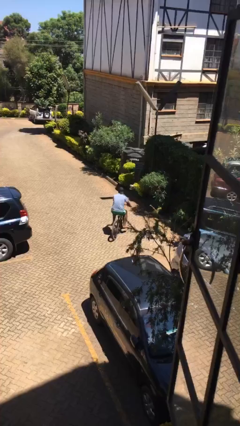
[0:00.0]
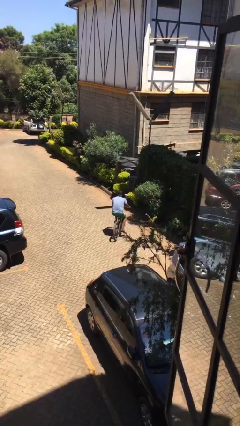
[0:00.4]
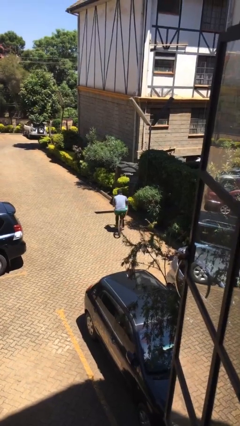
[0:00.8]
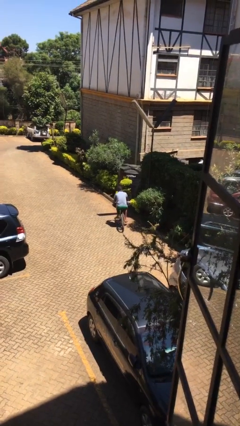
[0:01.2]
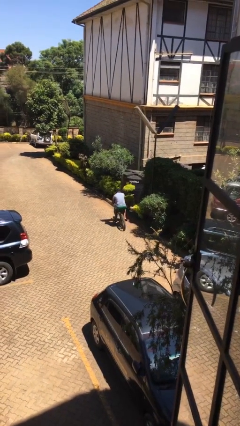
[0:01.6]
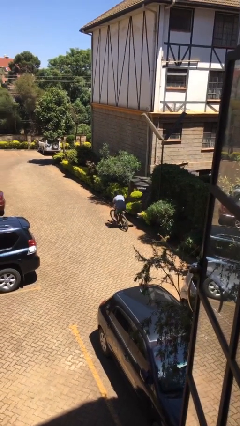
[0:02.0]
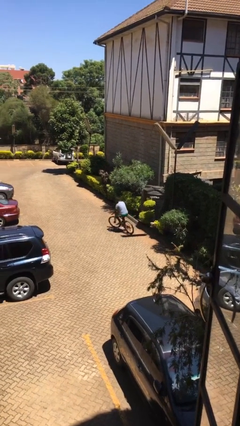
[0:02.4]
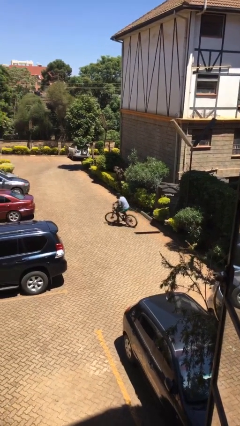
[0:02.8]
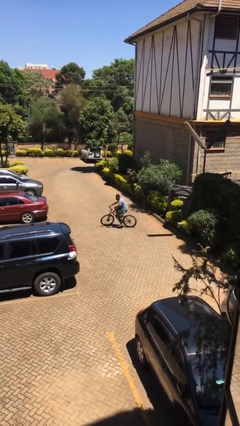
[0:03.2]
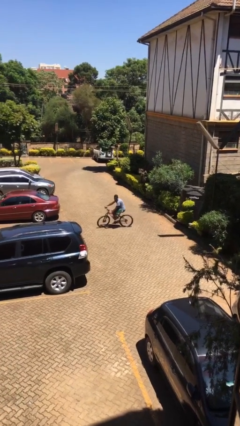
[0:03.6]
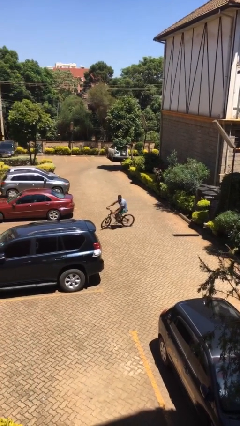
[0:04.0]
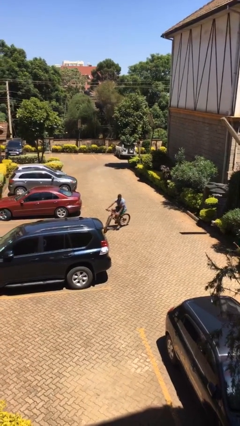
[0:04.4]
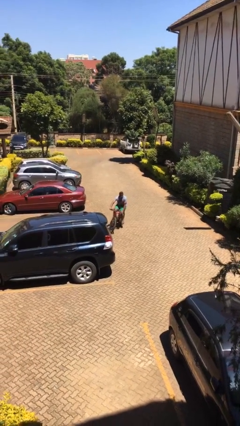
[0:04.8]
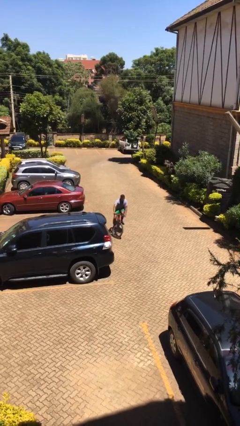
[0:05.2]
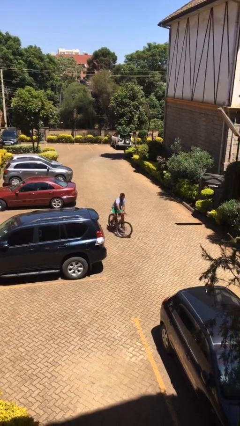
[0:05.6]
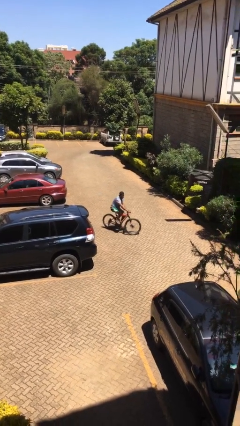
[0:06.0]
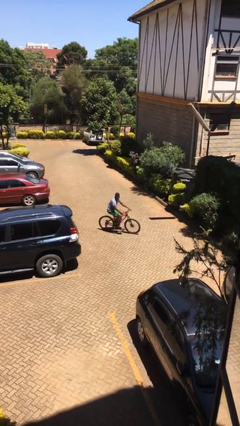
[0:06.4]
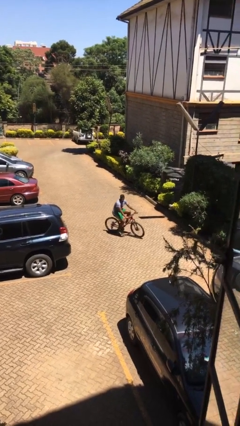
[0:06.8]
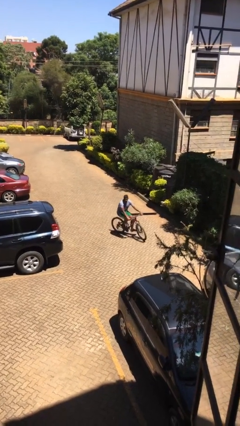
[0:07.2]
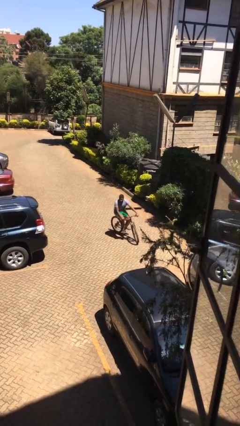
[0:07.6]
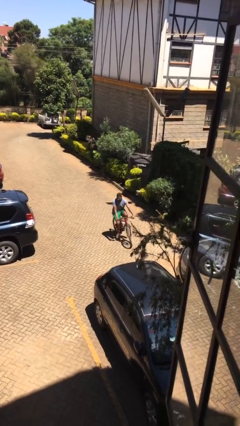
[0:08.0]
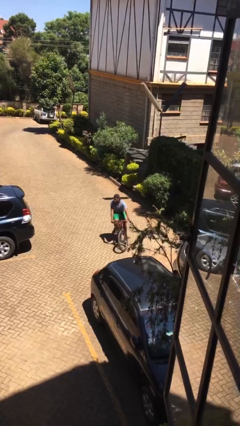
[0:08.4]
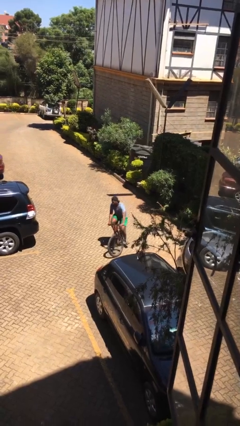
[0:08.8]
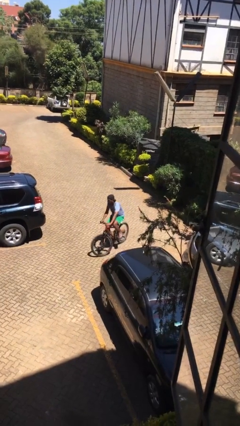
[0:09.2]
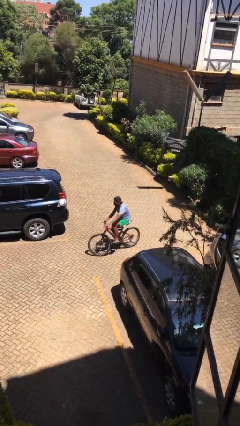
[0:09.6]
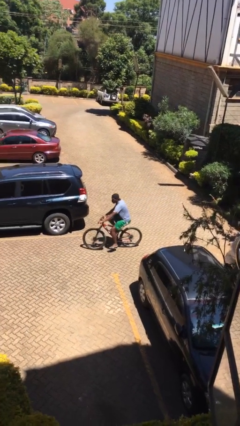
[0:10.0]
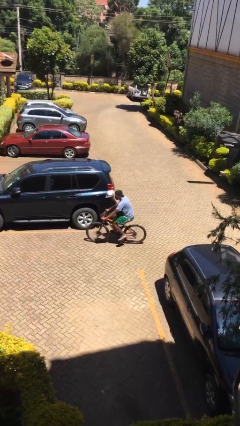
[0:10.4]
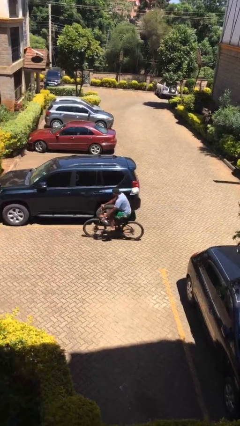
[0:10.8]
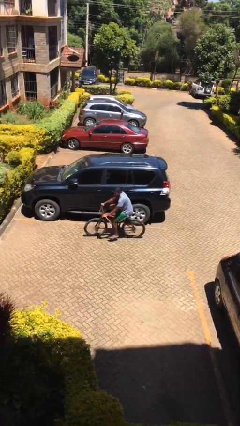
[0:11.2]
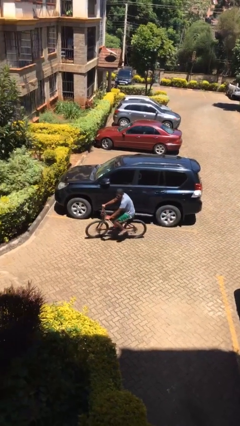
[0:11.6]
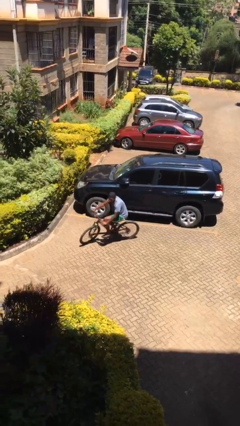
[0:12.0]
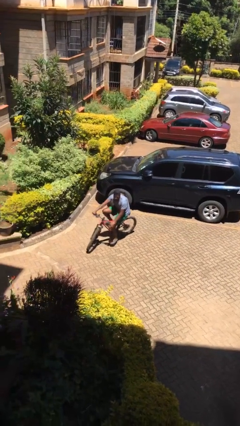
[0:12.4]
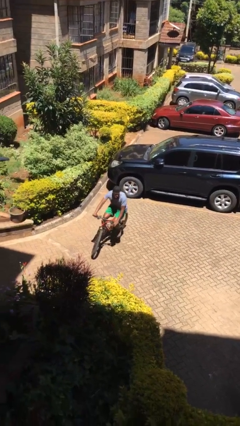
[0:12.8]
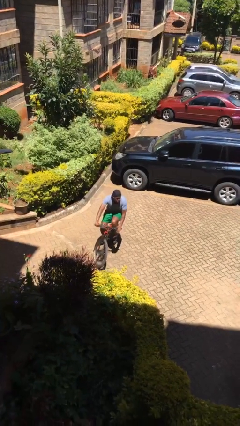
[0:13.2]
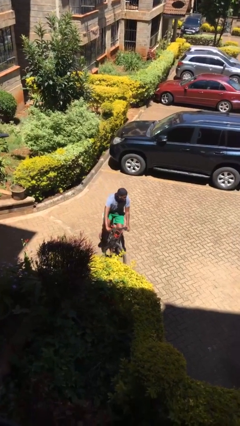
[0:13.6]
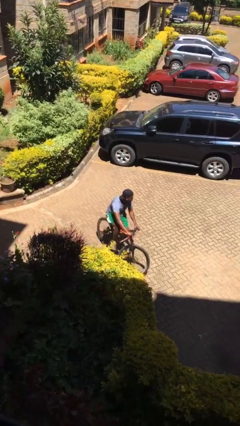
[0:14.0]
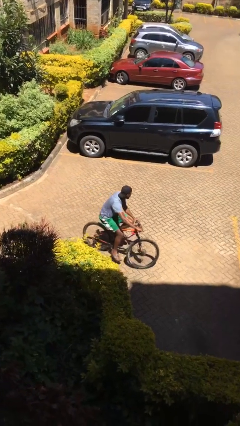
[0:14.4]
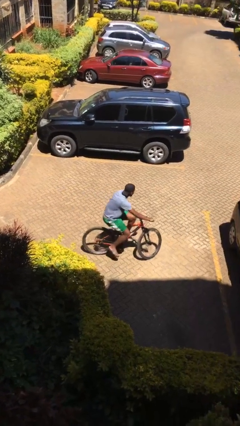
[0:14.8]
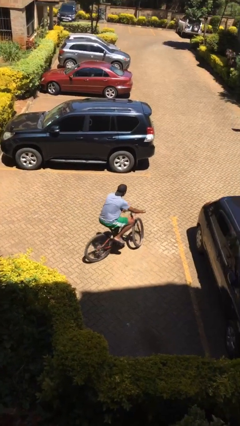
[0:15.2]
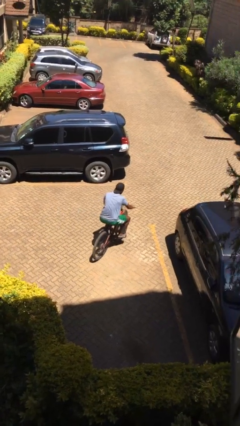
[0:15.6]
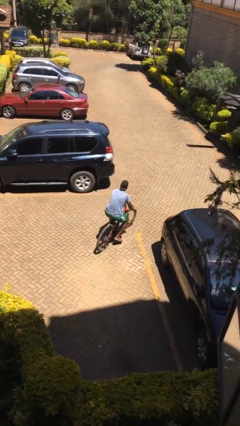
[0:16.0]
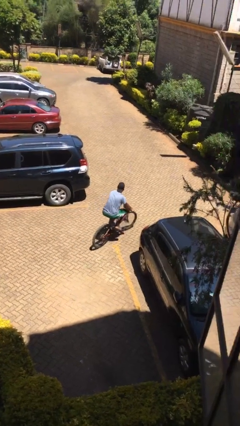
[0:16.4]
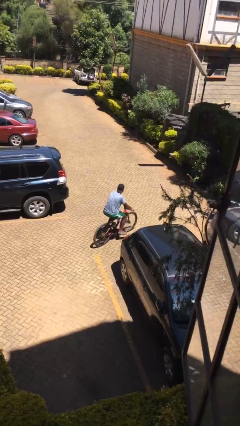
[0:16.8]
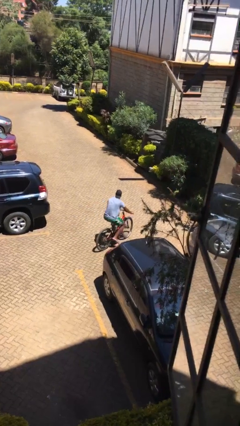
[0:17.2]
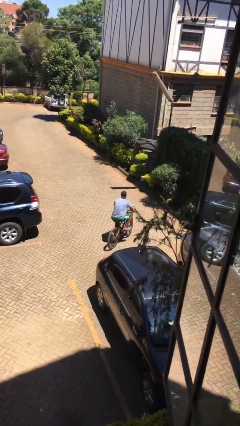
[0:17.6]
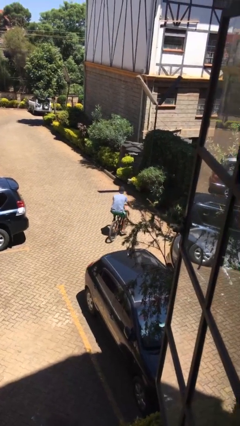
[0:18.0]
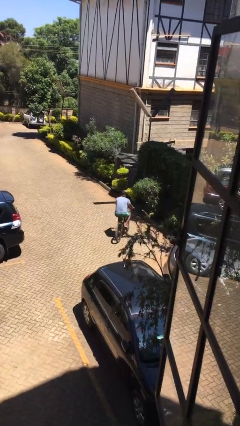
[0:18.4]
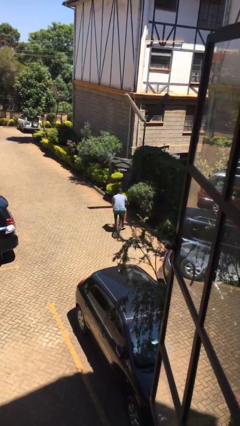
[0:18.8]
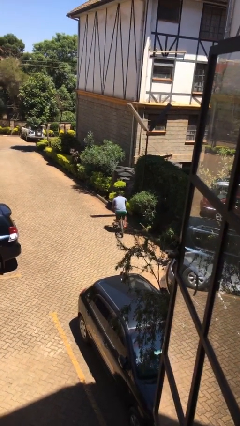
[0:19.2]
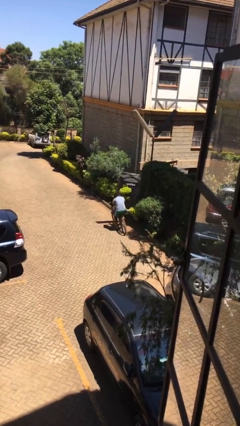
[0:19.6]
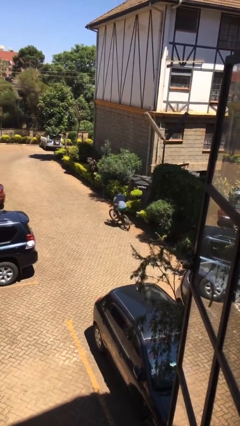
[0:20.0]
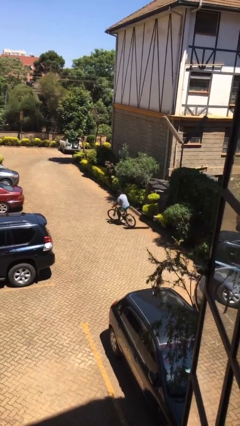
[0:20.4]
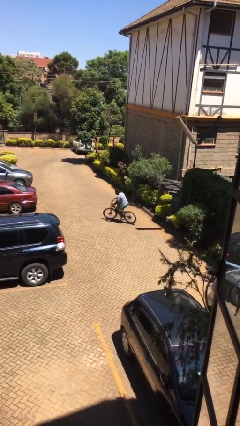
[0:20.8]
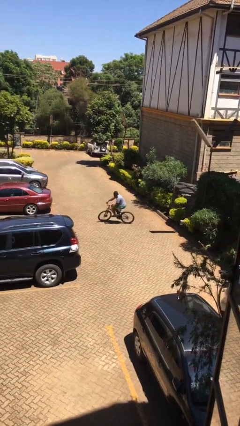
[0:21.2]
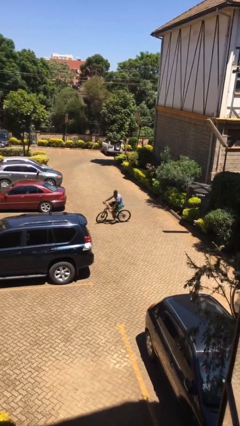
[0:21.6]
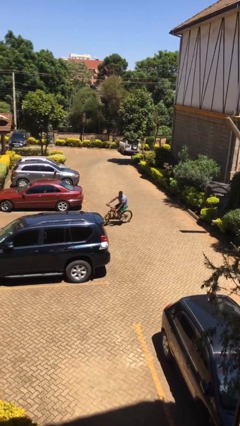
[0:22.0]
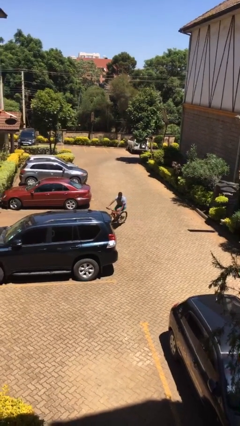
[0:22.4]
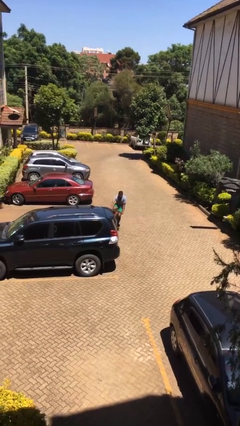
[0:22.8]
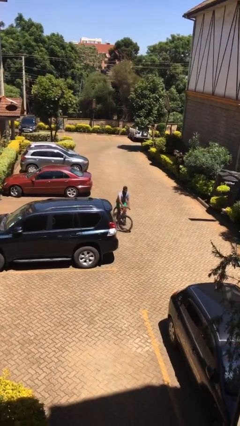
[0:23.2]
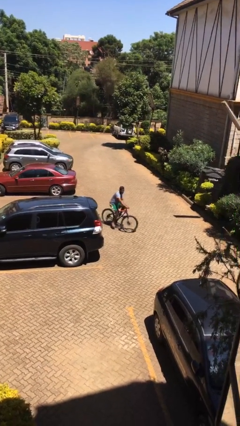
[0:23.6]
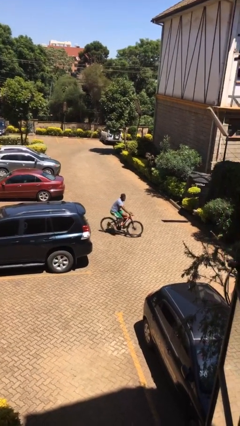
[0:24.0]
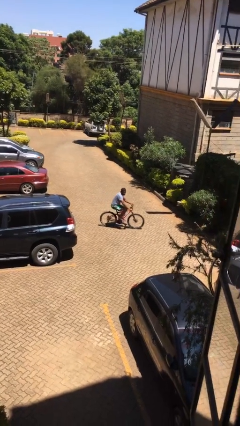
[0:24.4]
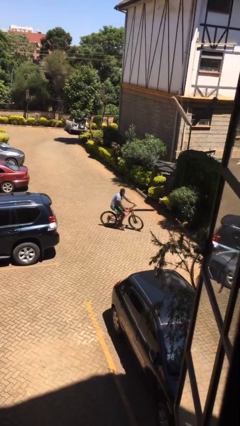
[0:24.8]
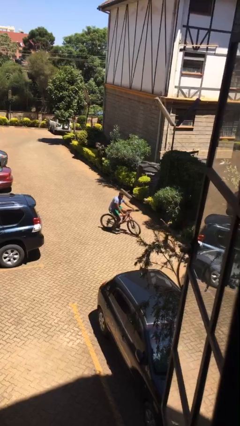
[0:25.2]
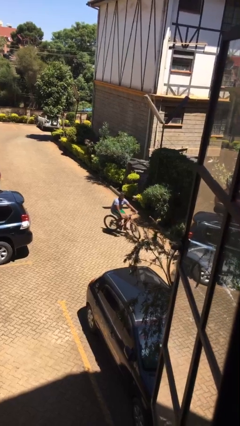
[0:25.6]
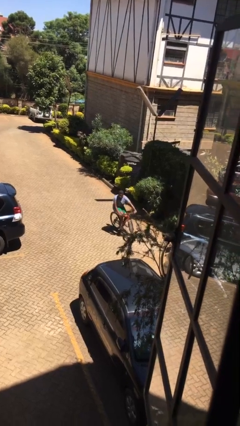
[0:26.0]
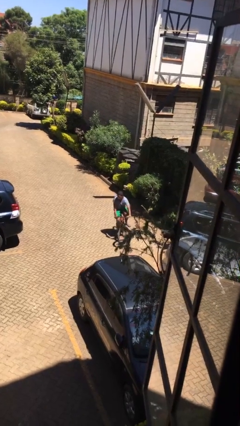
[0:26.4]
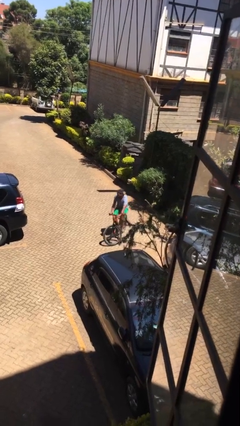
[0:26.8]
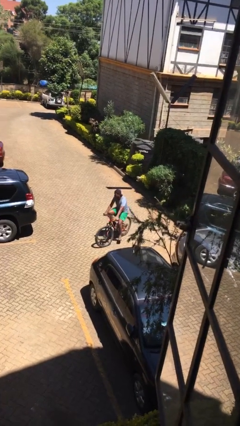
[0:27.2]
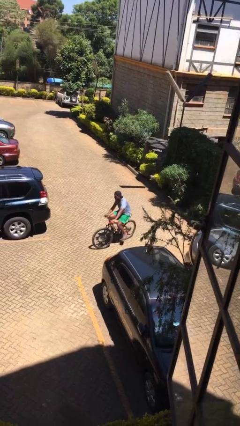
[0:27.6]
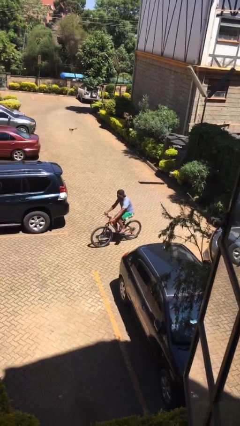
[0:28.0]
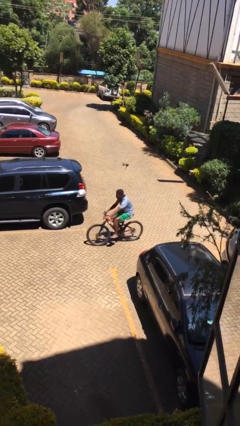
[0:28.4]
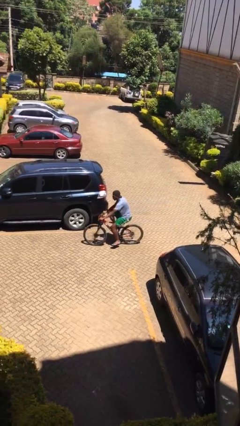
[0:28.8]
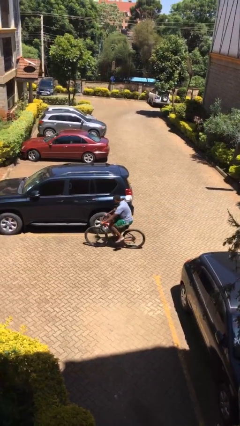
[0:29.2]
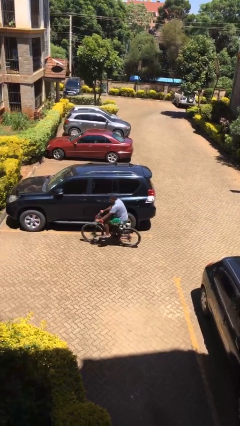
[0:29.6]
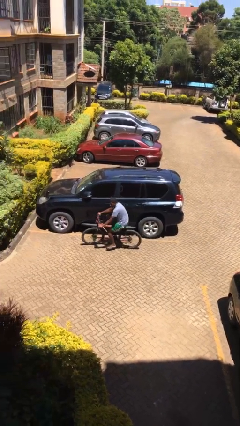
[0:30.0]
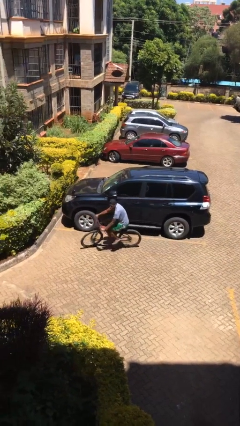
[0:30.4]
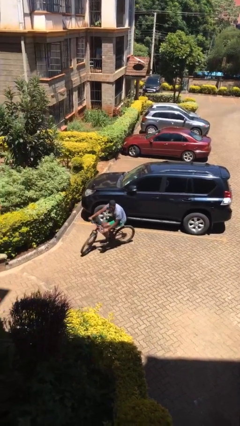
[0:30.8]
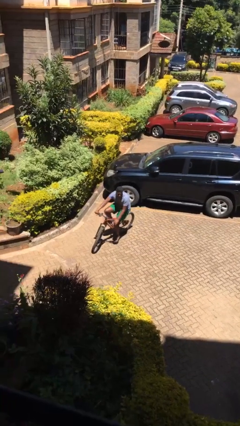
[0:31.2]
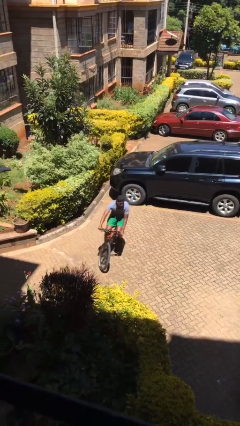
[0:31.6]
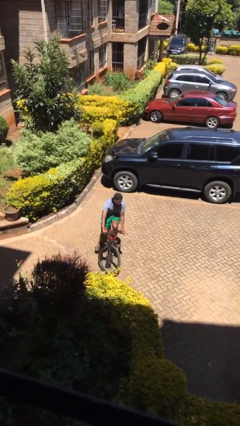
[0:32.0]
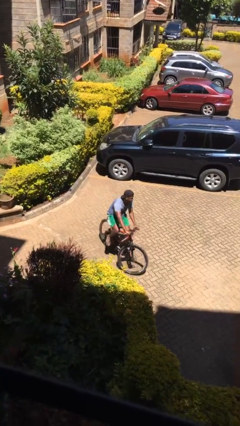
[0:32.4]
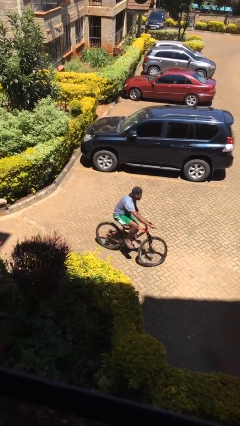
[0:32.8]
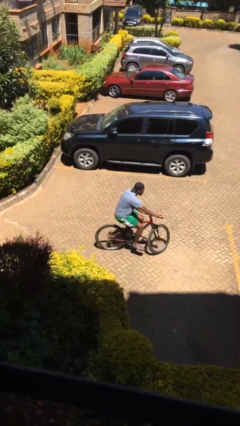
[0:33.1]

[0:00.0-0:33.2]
person rides bicycle

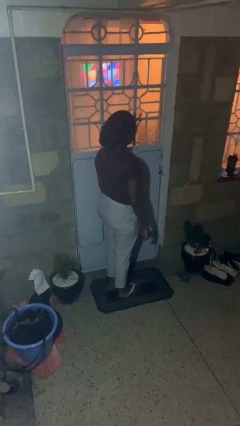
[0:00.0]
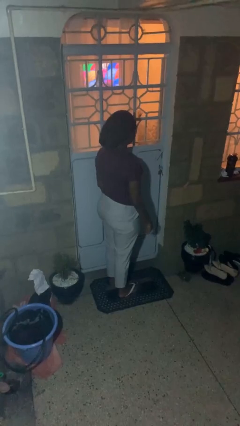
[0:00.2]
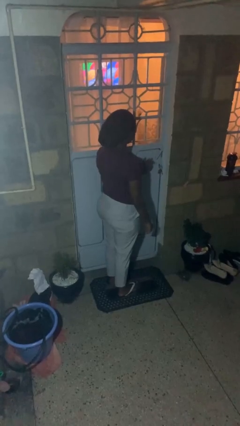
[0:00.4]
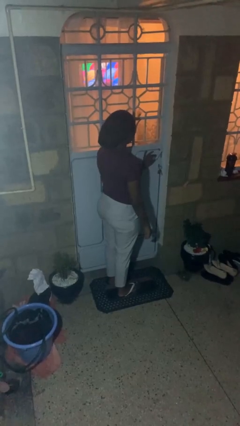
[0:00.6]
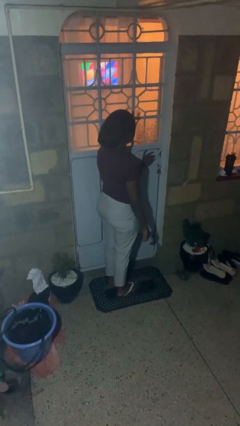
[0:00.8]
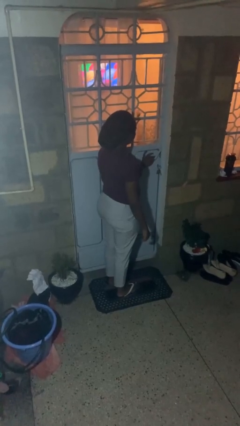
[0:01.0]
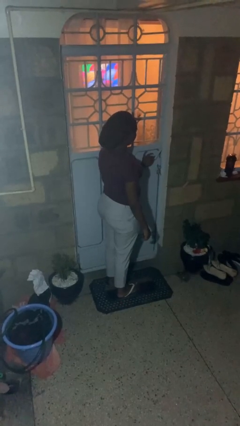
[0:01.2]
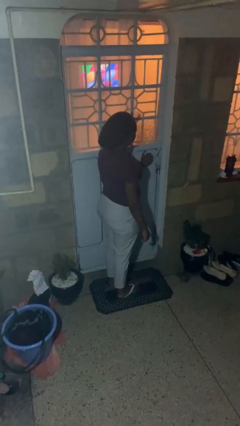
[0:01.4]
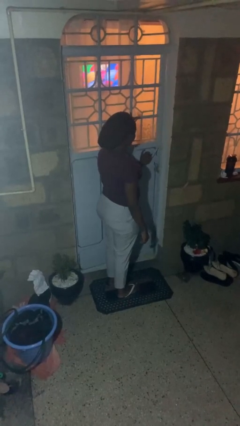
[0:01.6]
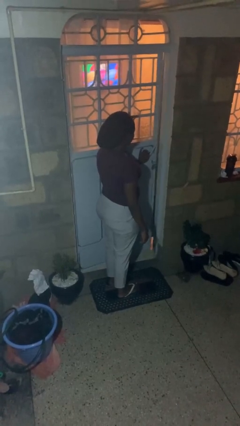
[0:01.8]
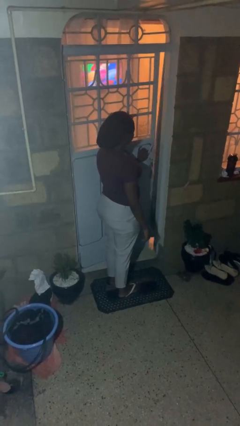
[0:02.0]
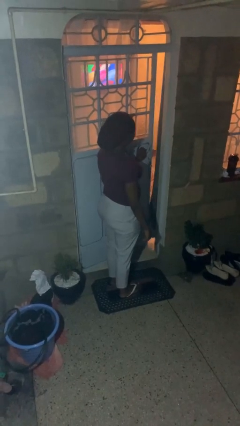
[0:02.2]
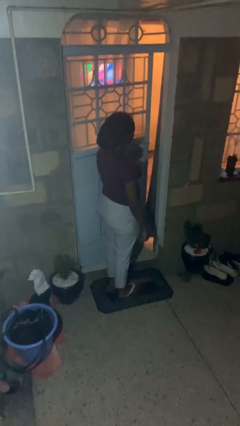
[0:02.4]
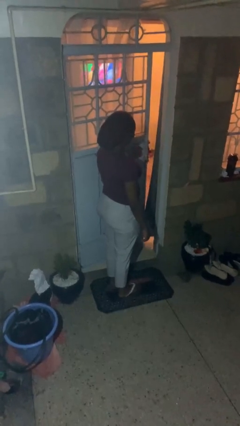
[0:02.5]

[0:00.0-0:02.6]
person opens facility door
